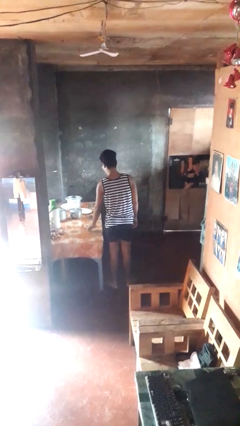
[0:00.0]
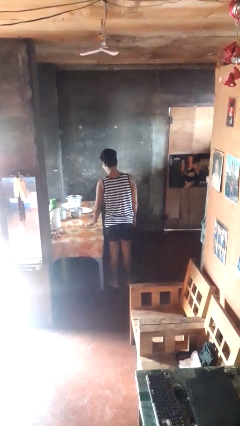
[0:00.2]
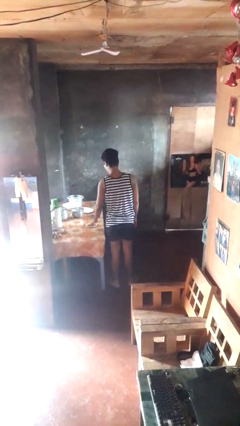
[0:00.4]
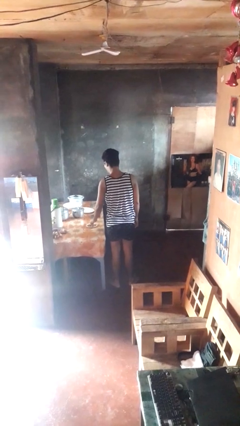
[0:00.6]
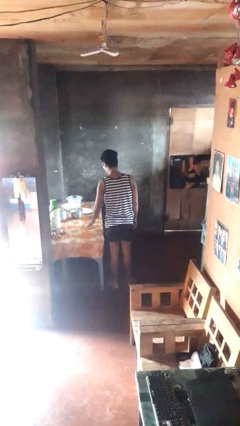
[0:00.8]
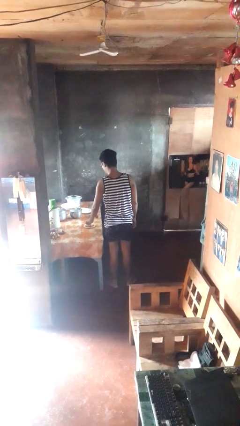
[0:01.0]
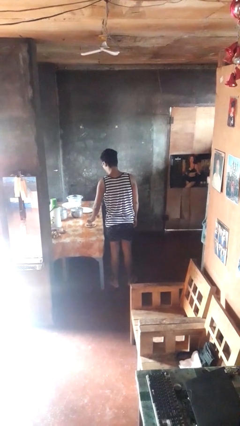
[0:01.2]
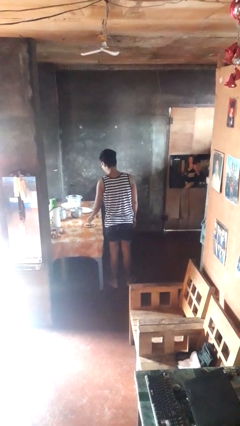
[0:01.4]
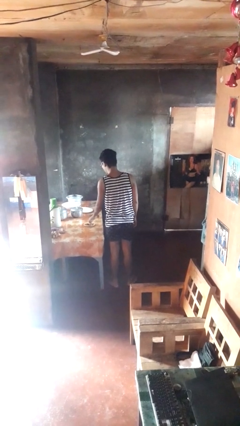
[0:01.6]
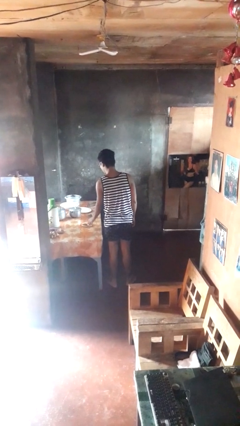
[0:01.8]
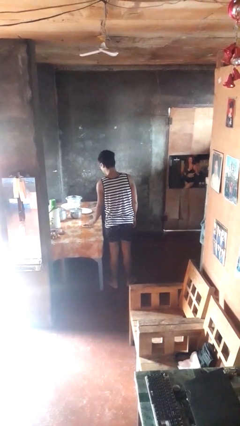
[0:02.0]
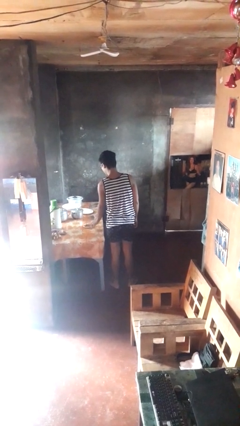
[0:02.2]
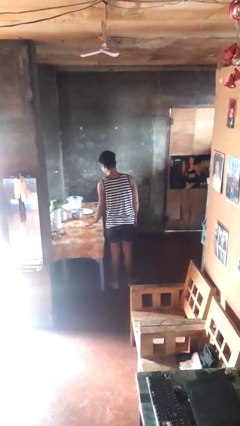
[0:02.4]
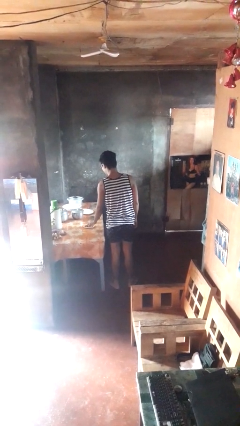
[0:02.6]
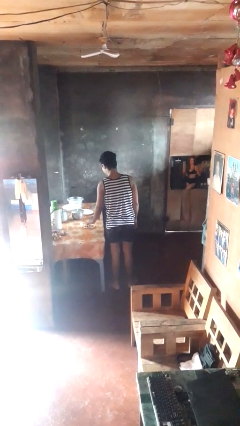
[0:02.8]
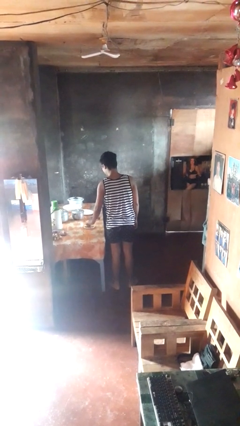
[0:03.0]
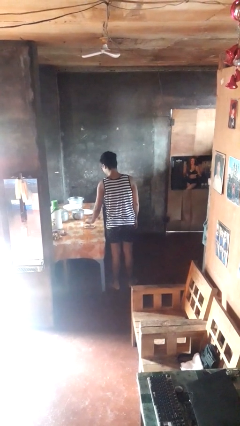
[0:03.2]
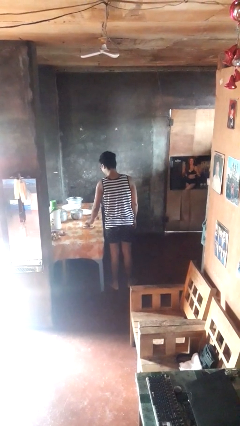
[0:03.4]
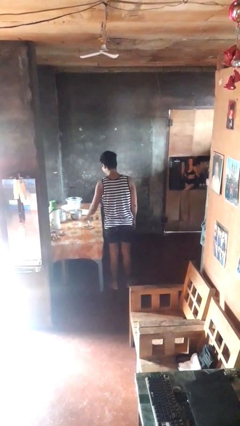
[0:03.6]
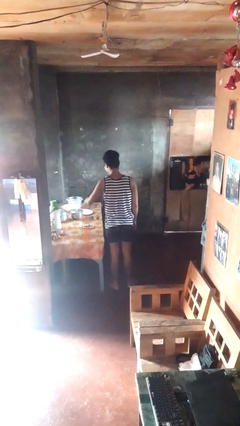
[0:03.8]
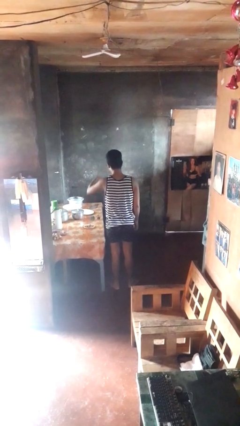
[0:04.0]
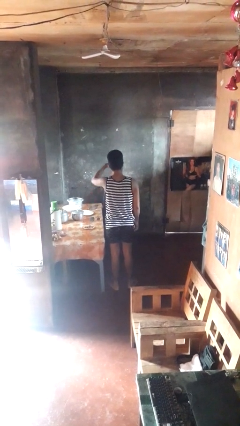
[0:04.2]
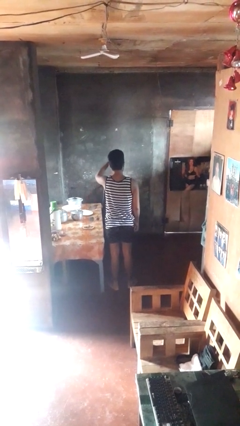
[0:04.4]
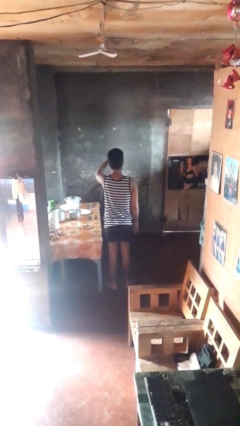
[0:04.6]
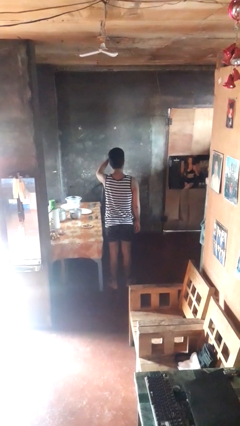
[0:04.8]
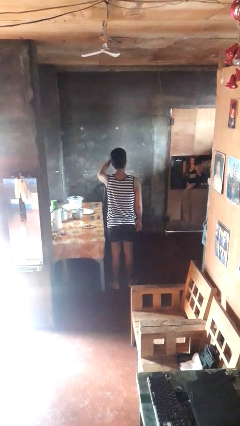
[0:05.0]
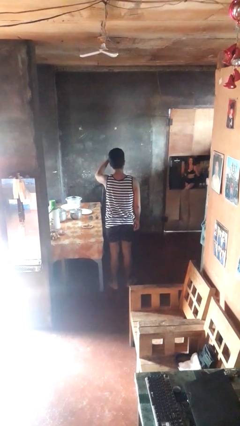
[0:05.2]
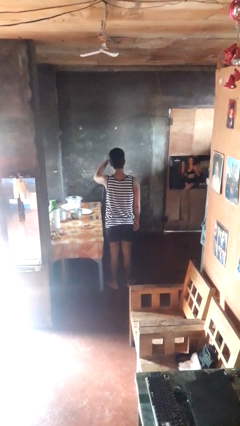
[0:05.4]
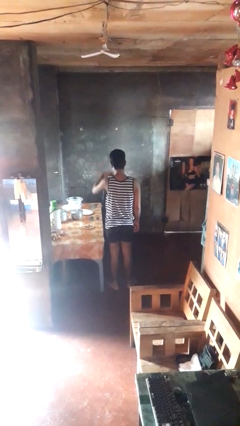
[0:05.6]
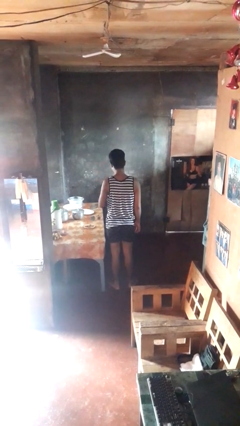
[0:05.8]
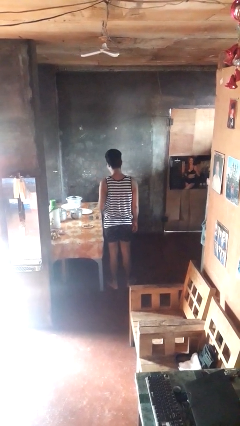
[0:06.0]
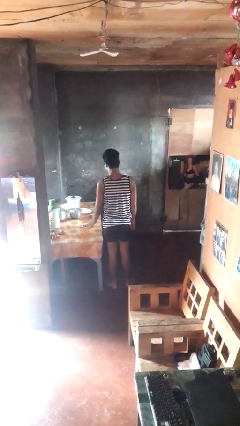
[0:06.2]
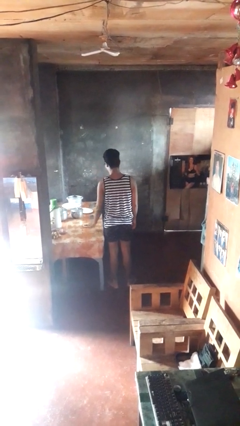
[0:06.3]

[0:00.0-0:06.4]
person eats with utensil

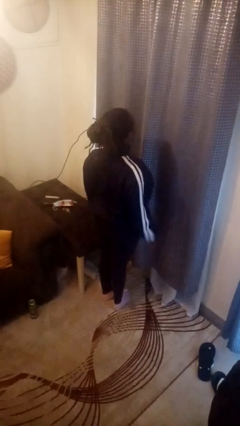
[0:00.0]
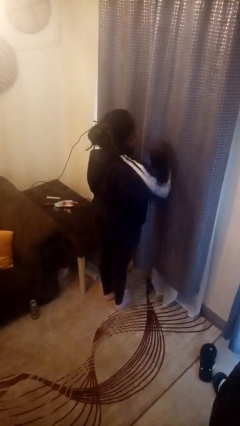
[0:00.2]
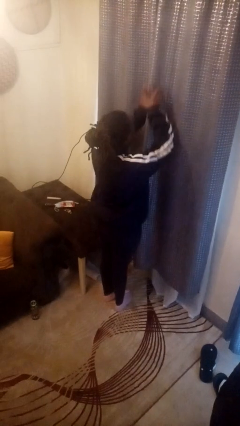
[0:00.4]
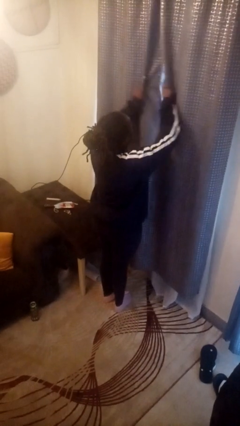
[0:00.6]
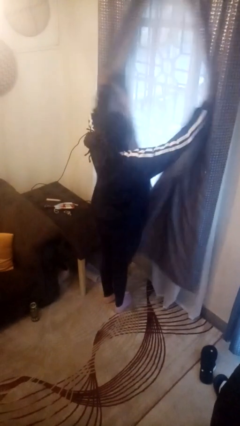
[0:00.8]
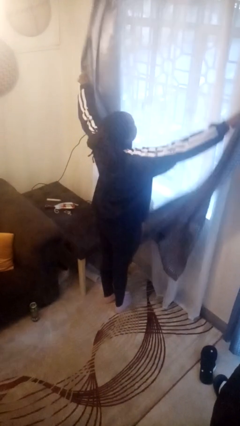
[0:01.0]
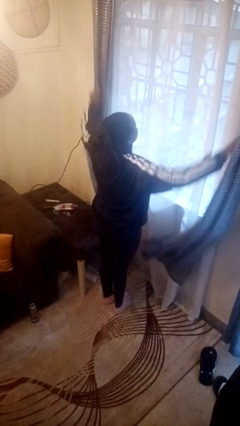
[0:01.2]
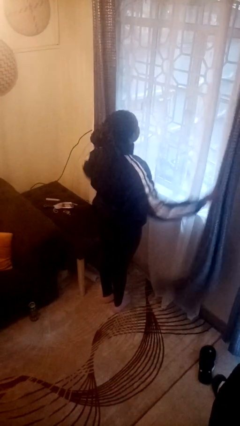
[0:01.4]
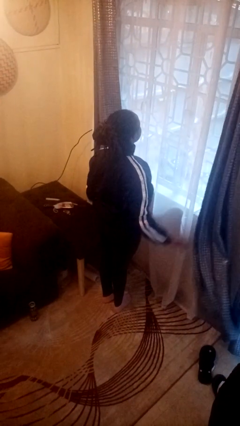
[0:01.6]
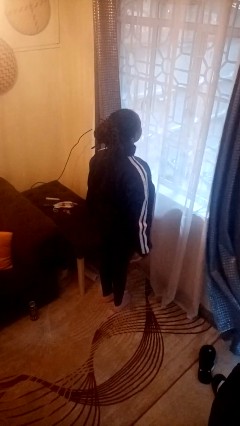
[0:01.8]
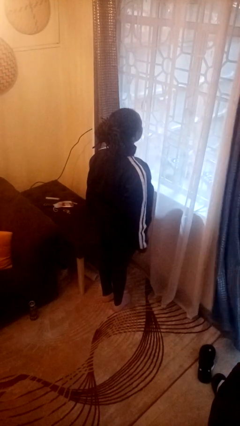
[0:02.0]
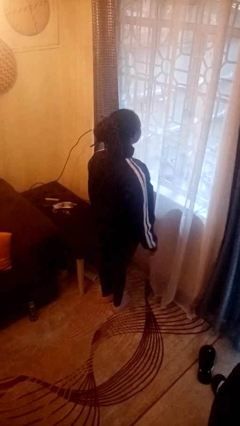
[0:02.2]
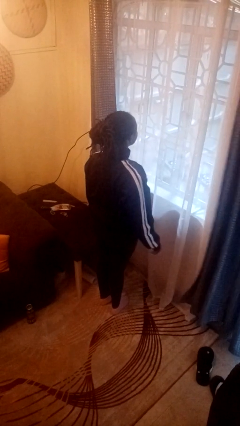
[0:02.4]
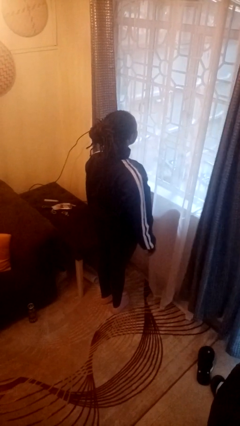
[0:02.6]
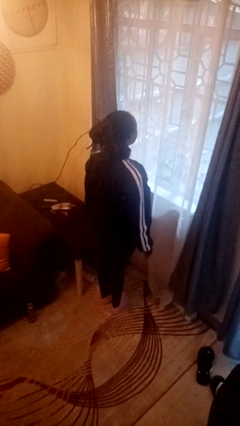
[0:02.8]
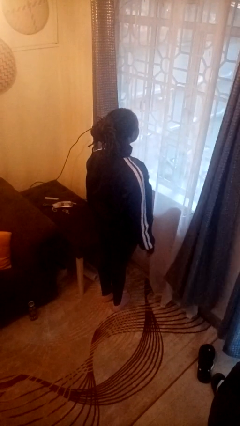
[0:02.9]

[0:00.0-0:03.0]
person opens curtains

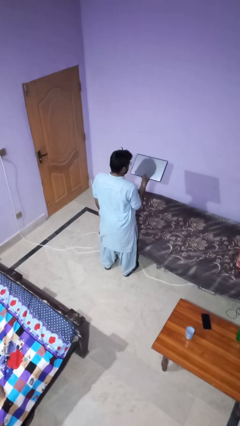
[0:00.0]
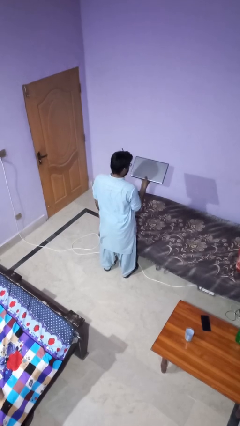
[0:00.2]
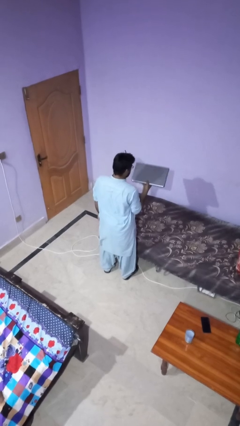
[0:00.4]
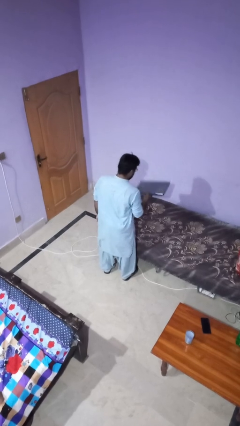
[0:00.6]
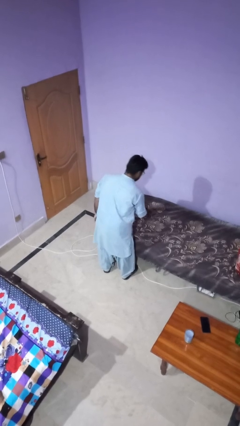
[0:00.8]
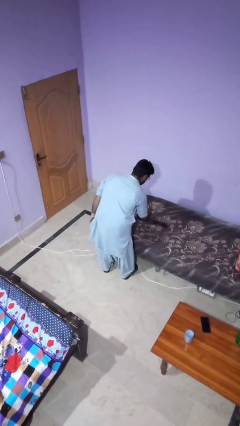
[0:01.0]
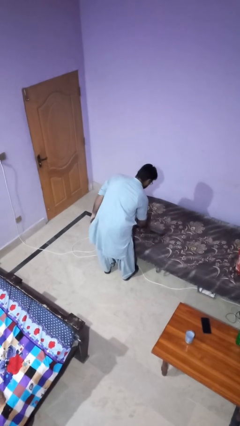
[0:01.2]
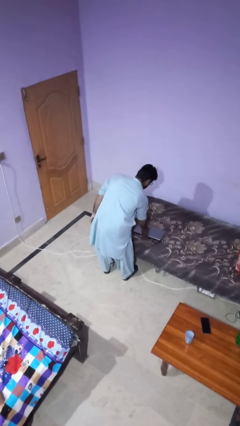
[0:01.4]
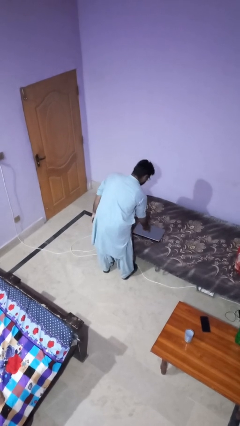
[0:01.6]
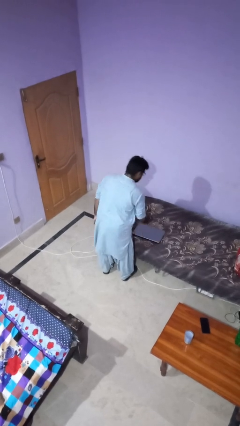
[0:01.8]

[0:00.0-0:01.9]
person puts down object on bed

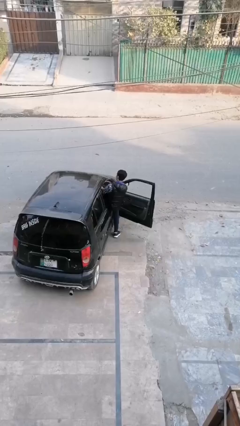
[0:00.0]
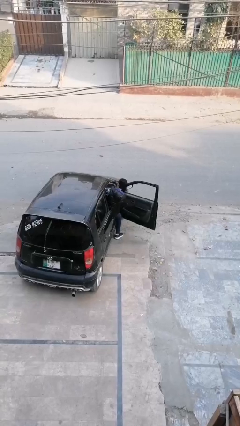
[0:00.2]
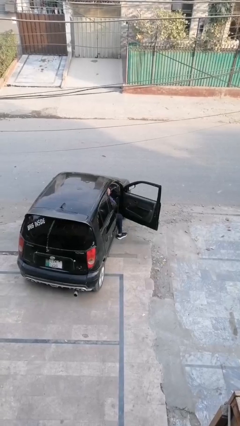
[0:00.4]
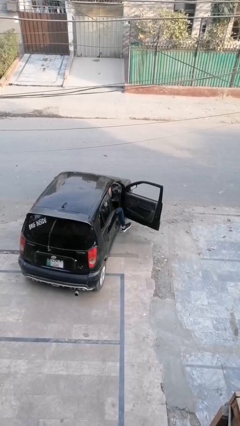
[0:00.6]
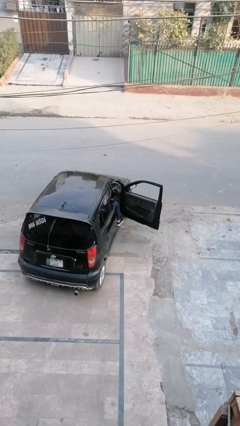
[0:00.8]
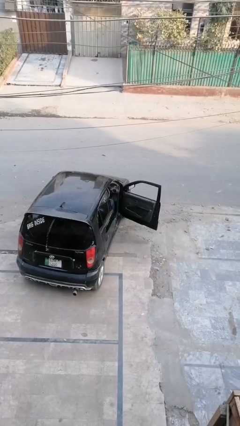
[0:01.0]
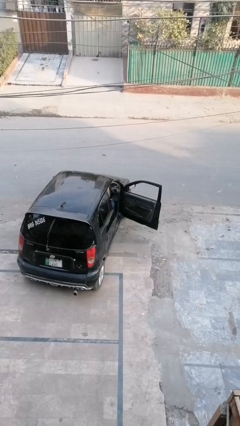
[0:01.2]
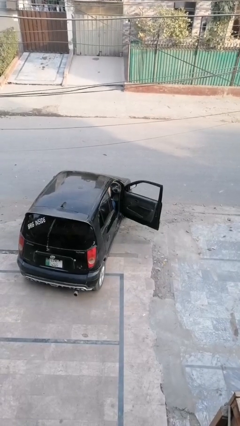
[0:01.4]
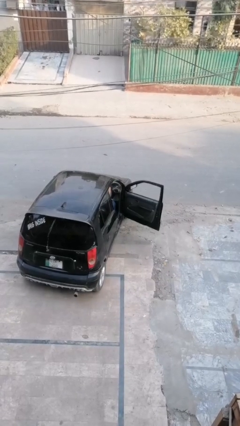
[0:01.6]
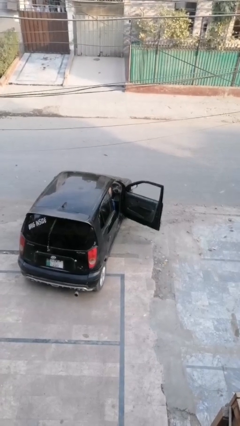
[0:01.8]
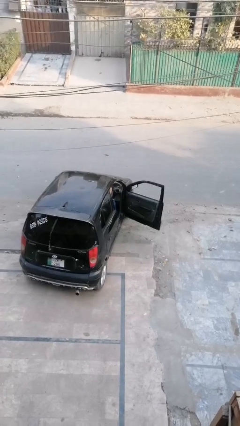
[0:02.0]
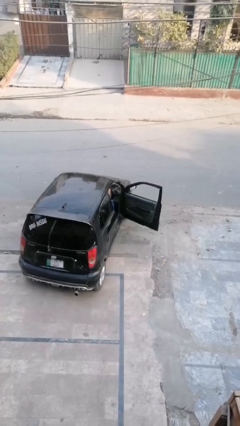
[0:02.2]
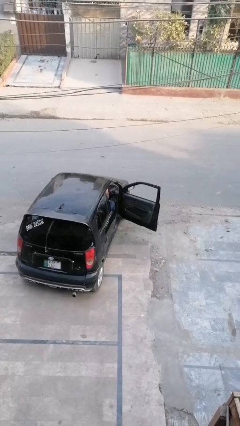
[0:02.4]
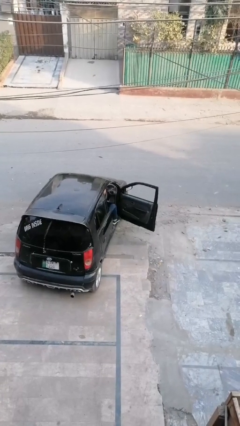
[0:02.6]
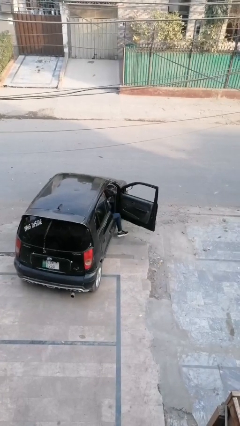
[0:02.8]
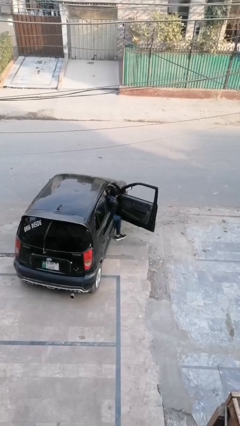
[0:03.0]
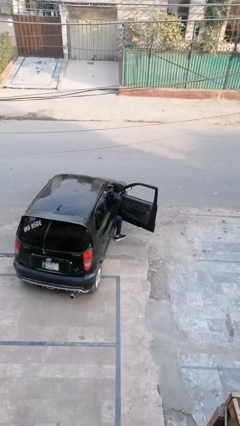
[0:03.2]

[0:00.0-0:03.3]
person enters car

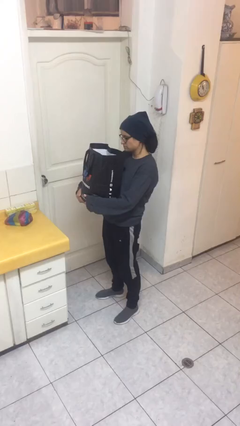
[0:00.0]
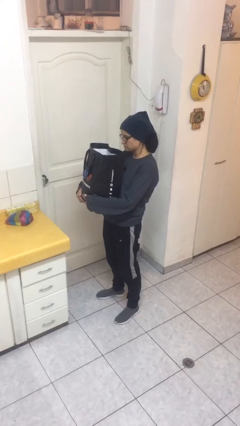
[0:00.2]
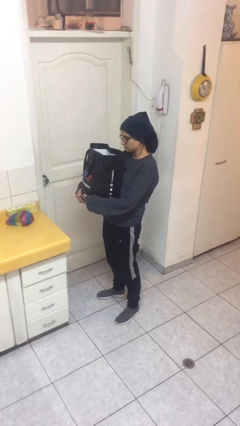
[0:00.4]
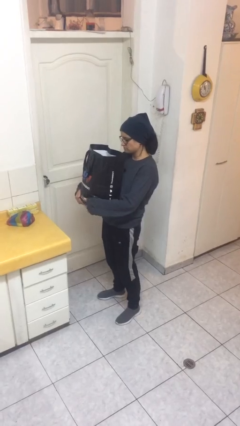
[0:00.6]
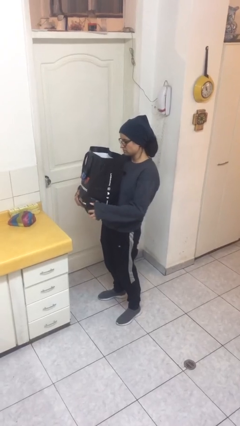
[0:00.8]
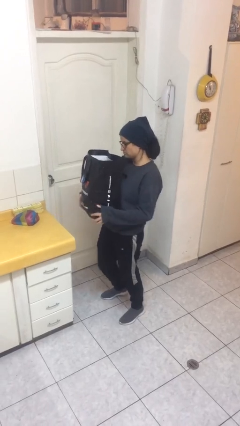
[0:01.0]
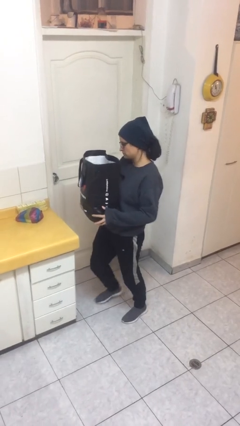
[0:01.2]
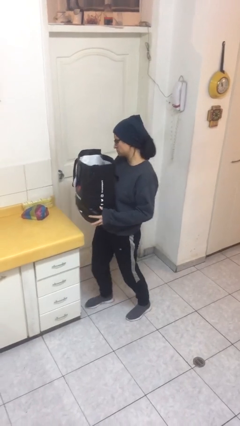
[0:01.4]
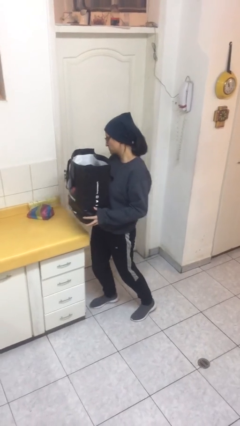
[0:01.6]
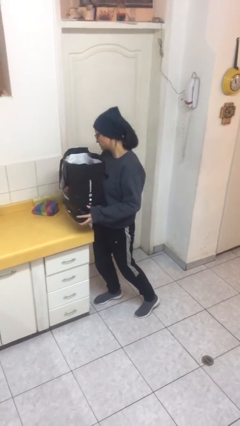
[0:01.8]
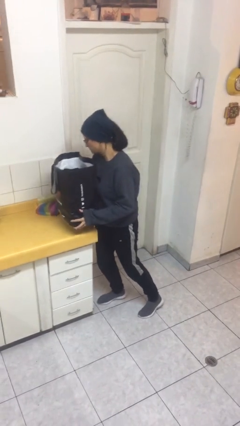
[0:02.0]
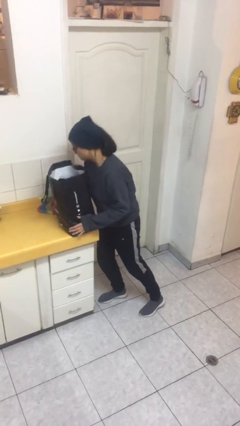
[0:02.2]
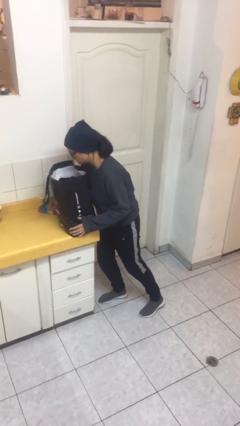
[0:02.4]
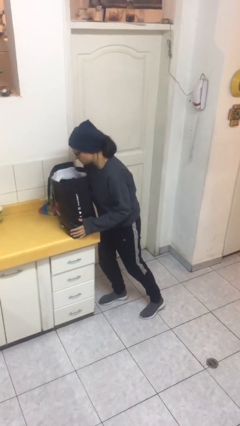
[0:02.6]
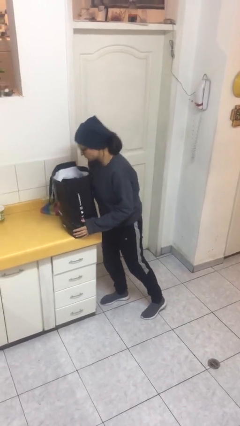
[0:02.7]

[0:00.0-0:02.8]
person puts down object on table
